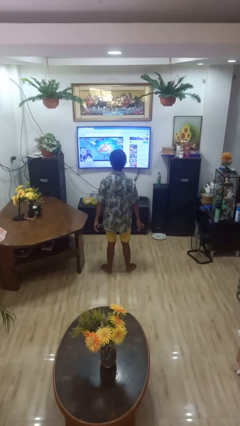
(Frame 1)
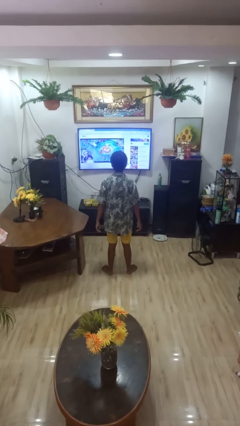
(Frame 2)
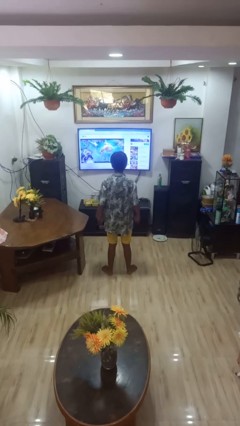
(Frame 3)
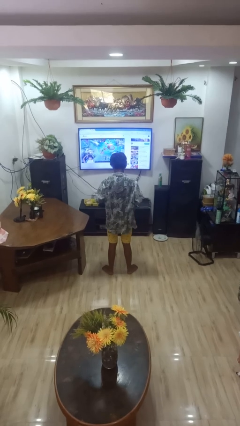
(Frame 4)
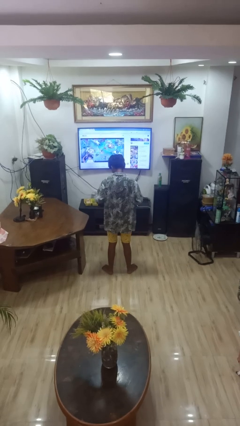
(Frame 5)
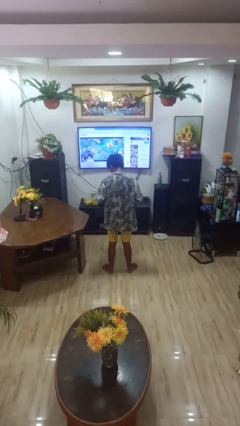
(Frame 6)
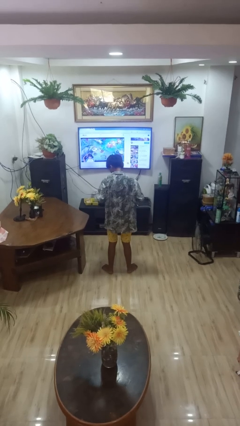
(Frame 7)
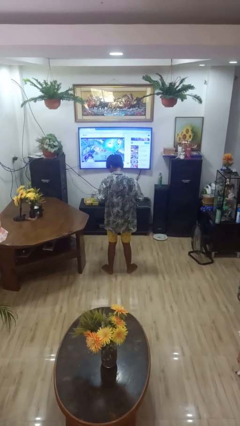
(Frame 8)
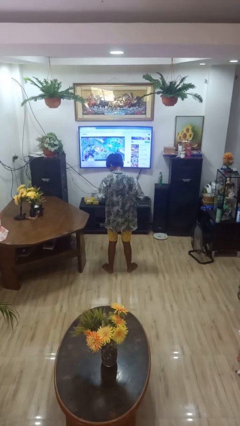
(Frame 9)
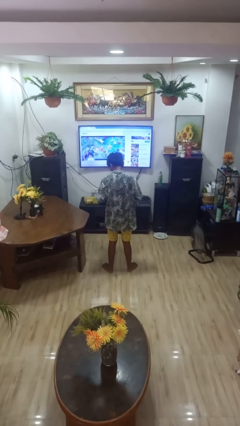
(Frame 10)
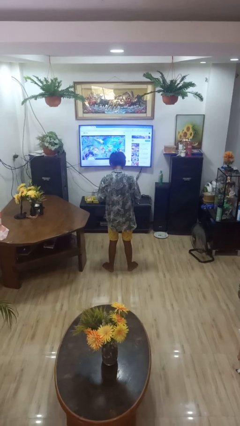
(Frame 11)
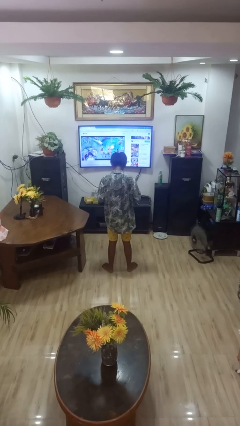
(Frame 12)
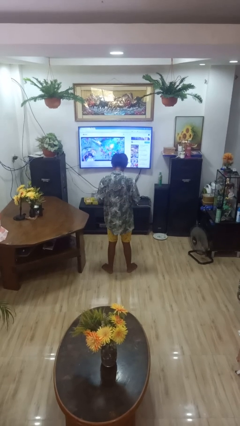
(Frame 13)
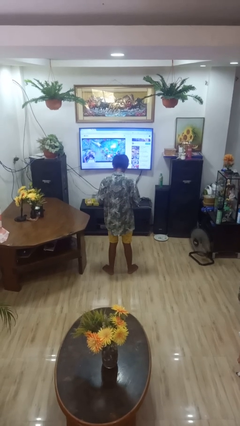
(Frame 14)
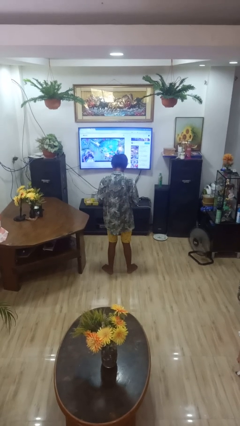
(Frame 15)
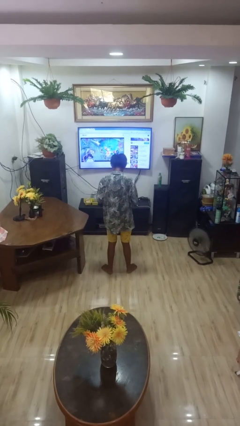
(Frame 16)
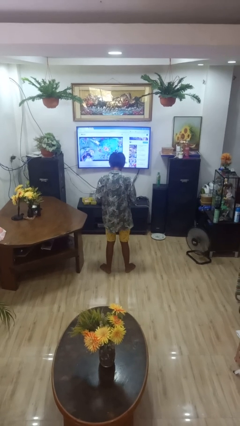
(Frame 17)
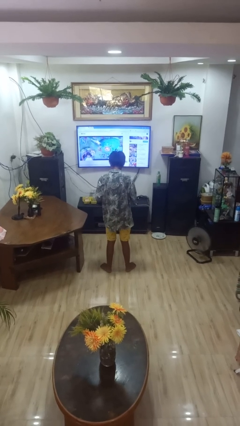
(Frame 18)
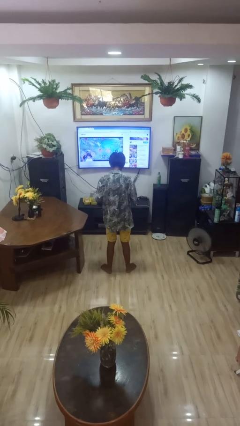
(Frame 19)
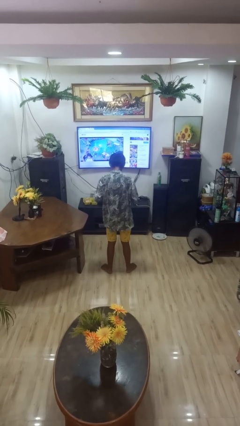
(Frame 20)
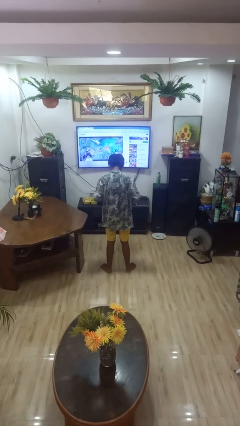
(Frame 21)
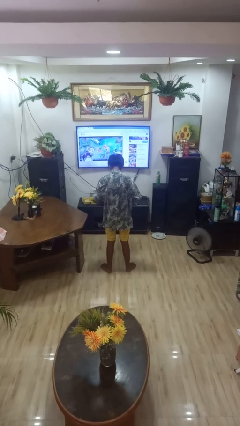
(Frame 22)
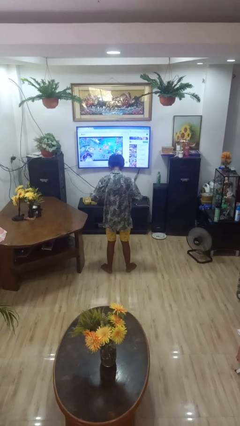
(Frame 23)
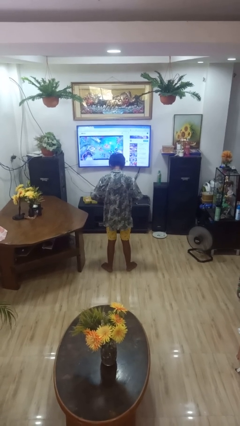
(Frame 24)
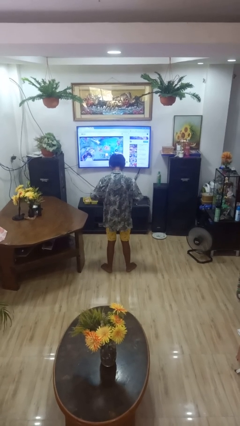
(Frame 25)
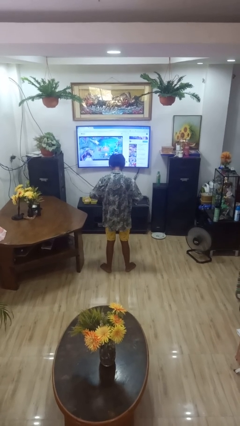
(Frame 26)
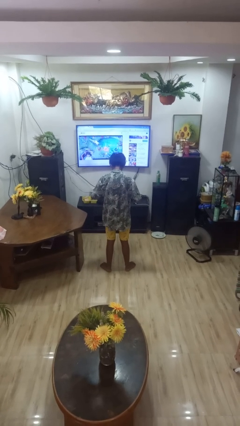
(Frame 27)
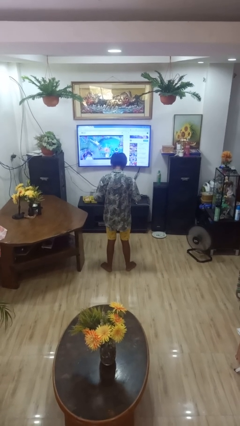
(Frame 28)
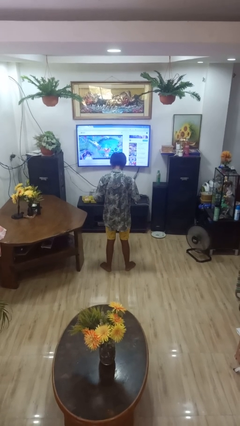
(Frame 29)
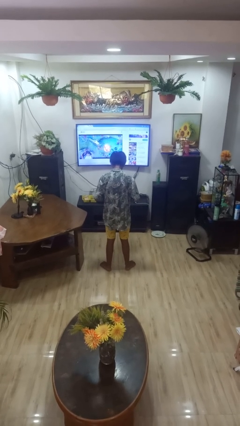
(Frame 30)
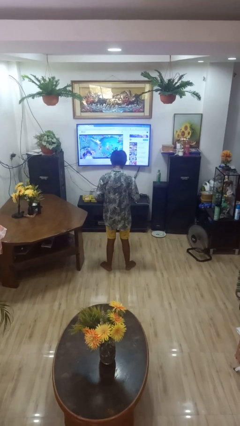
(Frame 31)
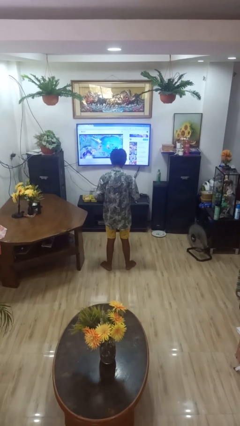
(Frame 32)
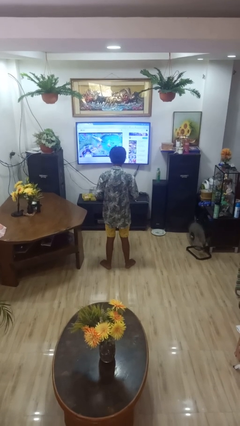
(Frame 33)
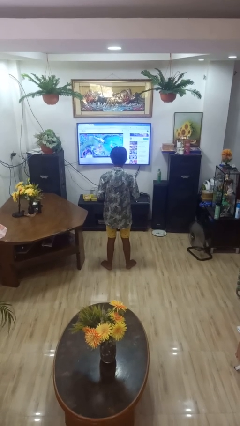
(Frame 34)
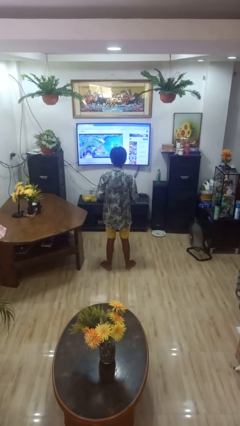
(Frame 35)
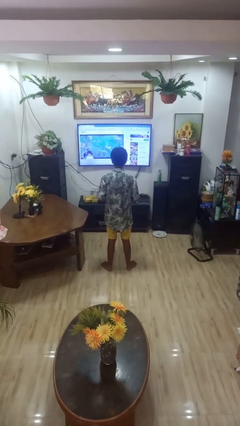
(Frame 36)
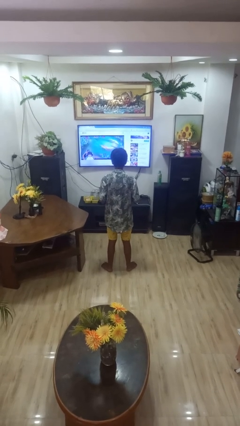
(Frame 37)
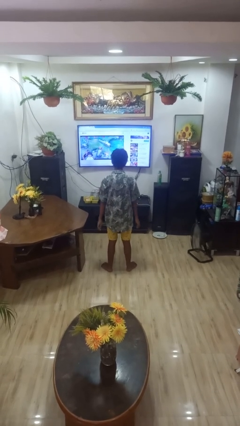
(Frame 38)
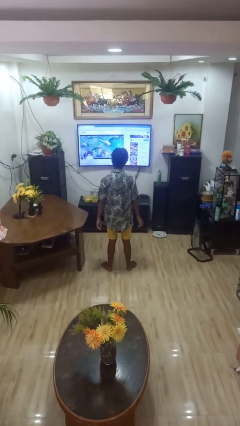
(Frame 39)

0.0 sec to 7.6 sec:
person buttons shirt

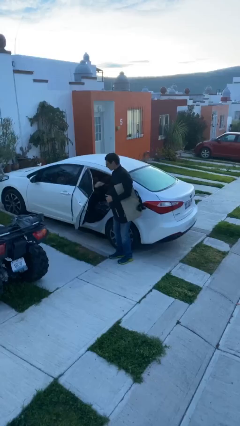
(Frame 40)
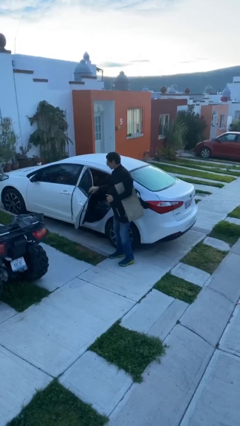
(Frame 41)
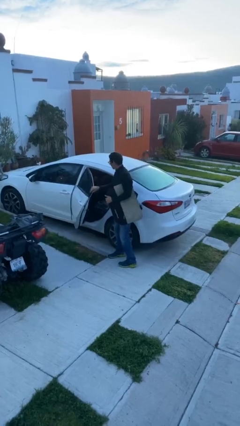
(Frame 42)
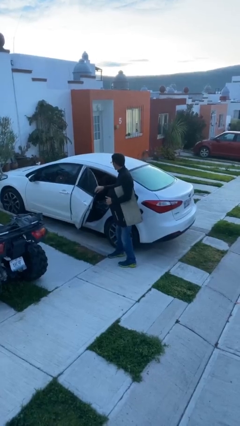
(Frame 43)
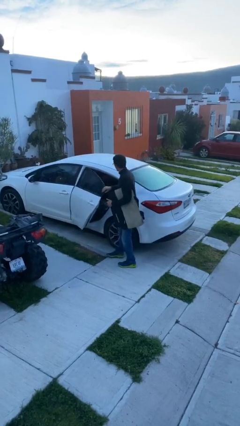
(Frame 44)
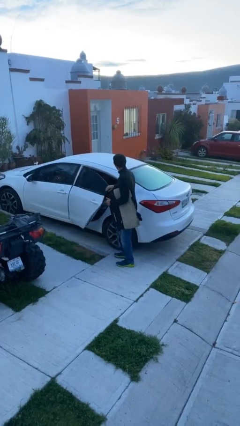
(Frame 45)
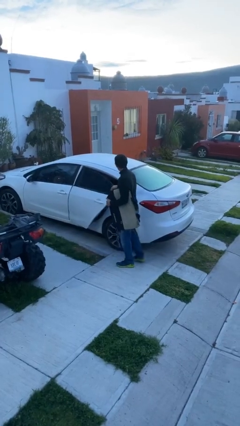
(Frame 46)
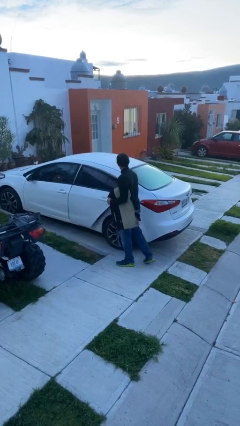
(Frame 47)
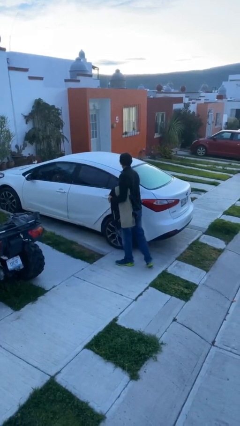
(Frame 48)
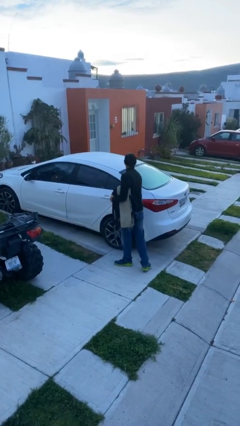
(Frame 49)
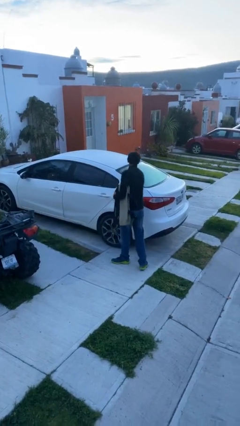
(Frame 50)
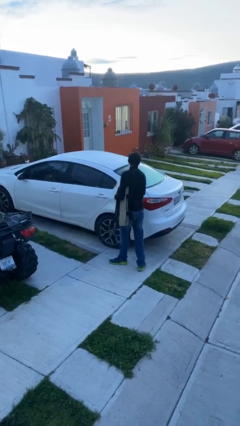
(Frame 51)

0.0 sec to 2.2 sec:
person closes car door

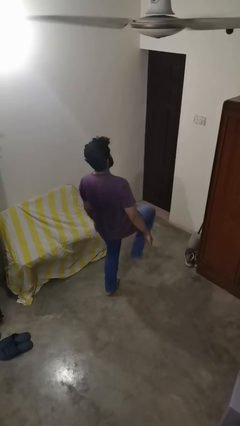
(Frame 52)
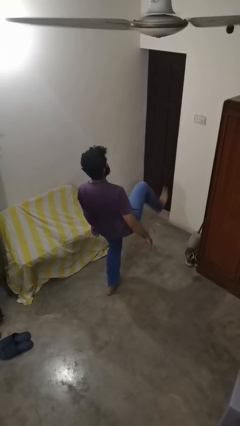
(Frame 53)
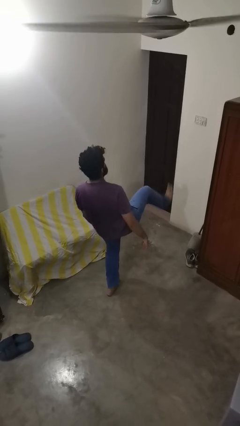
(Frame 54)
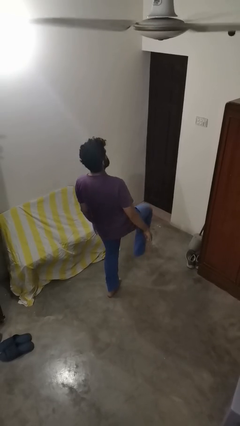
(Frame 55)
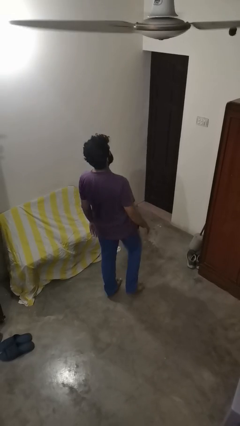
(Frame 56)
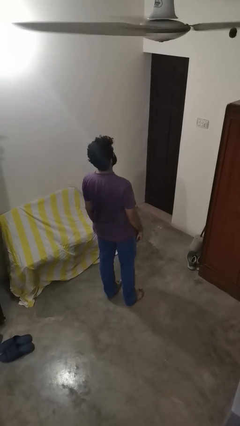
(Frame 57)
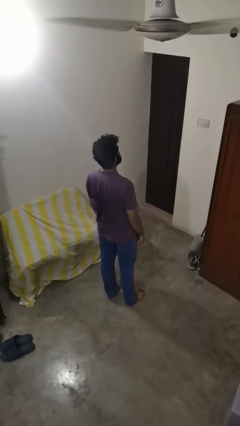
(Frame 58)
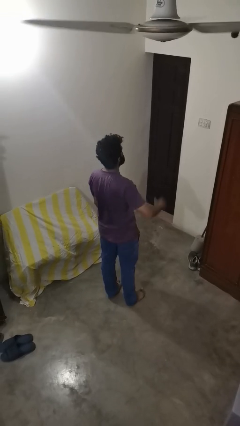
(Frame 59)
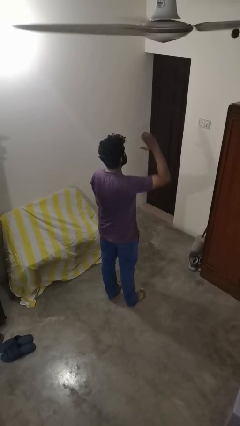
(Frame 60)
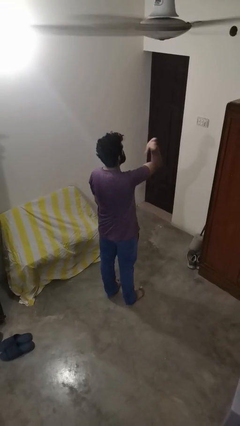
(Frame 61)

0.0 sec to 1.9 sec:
person karate kicks

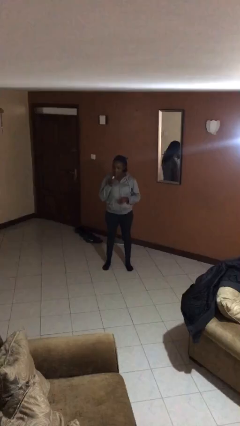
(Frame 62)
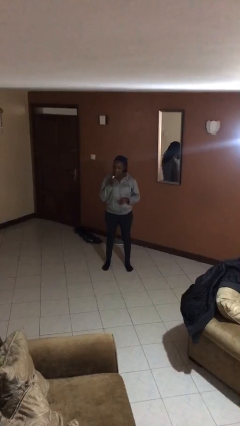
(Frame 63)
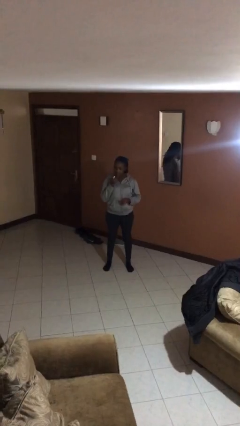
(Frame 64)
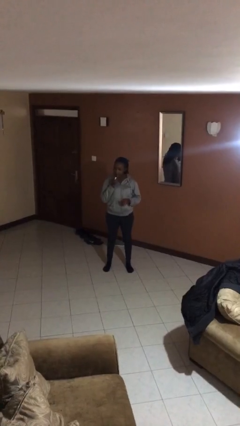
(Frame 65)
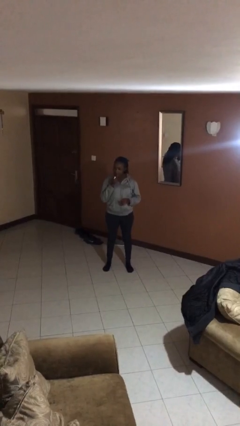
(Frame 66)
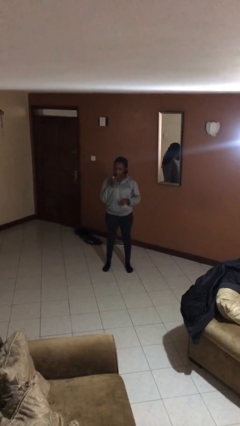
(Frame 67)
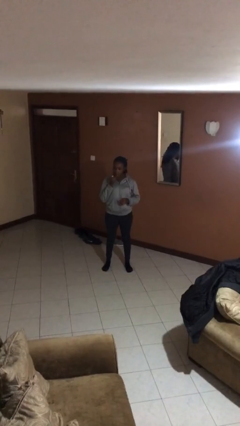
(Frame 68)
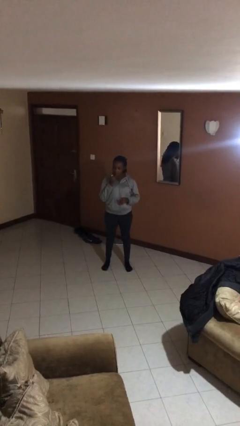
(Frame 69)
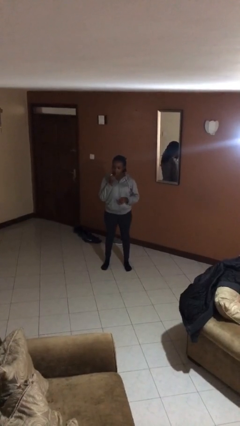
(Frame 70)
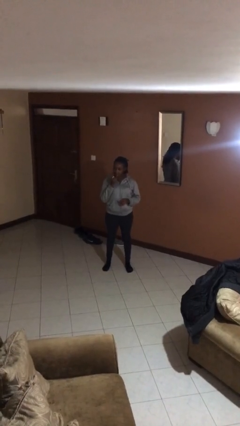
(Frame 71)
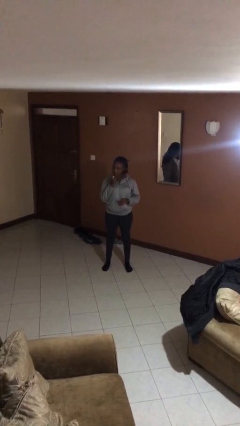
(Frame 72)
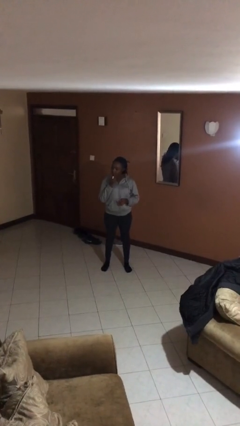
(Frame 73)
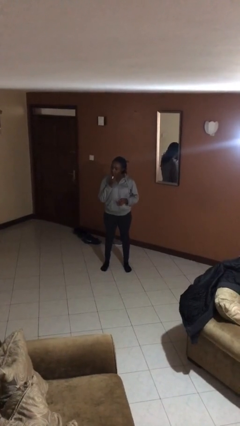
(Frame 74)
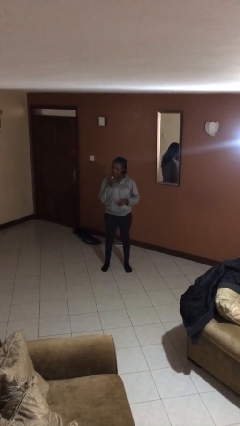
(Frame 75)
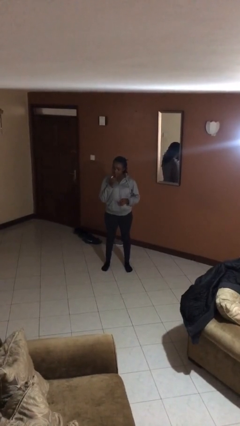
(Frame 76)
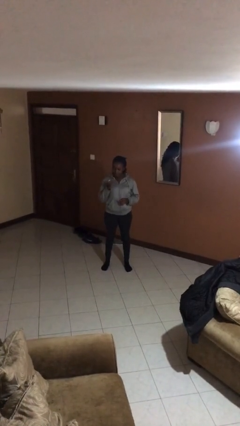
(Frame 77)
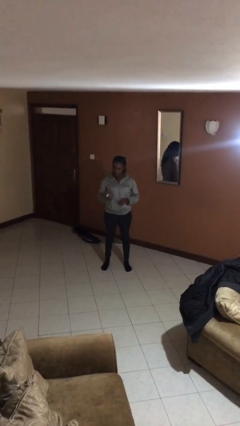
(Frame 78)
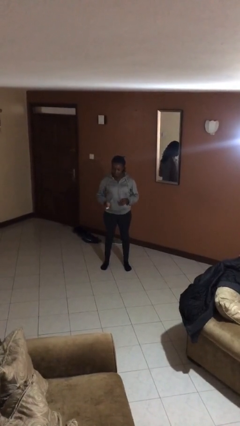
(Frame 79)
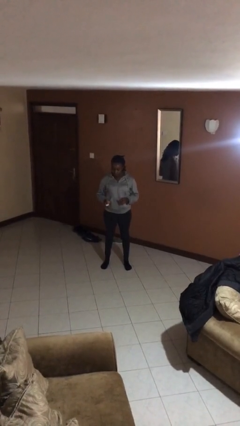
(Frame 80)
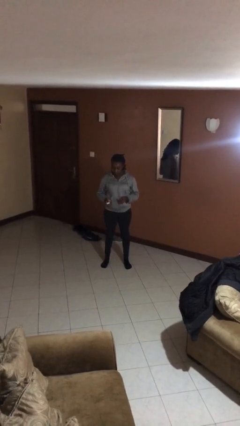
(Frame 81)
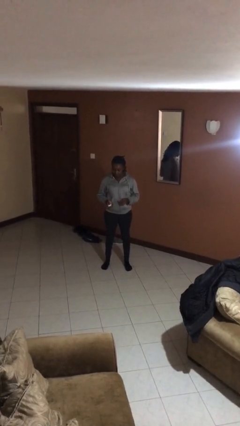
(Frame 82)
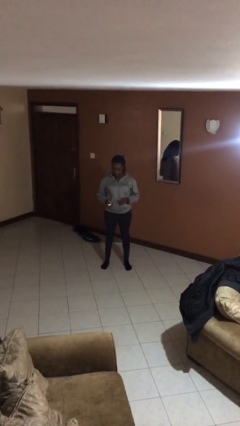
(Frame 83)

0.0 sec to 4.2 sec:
person applies lip makeup

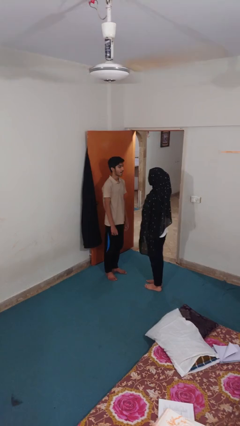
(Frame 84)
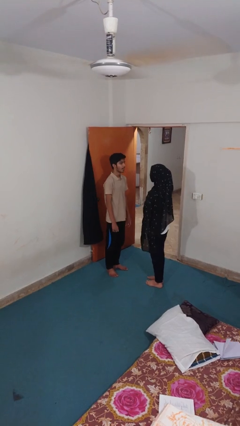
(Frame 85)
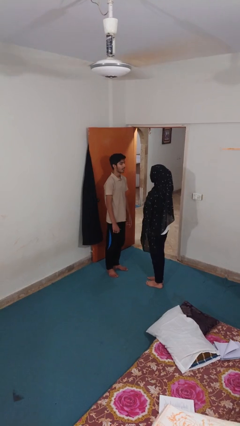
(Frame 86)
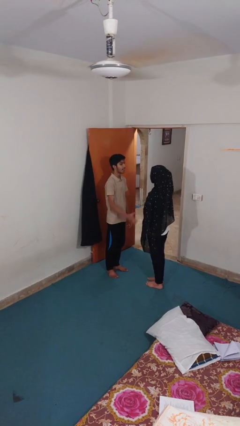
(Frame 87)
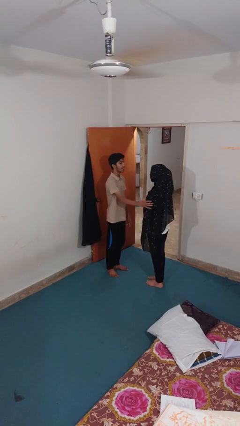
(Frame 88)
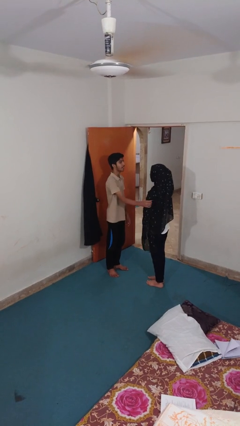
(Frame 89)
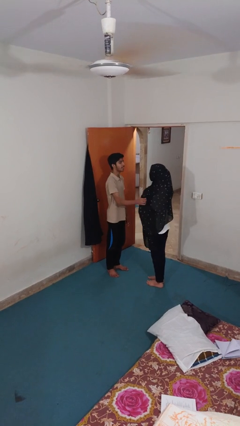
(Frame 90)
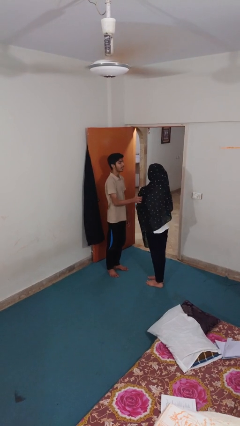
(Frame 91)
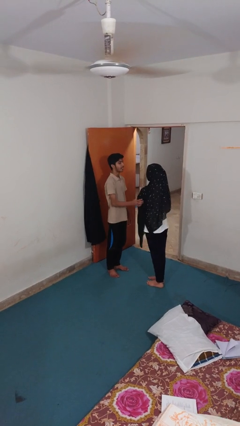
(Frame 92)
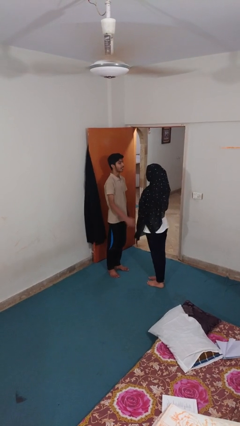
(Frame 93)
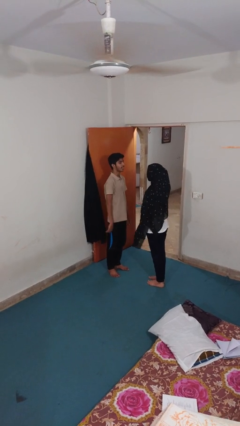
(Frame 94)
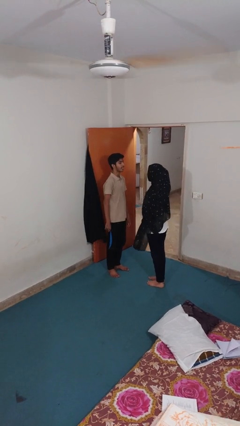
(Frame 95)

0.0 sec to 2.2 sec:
person grabs person by bicep
